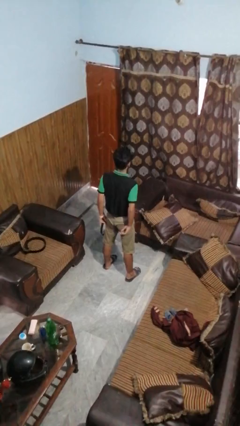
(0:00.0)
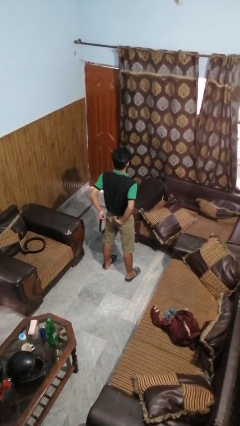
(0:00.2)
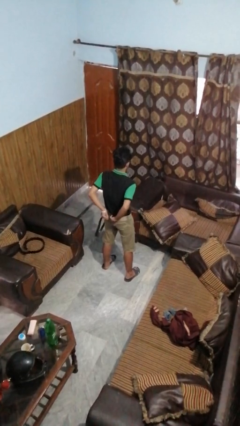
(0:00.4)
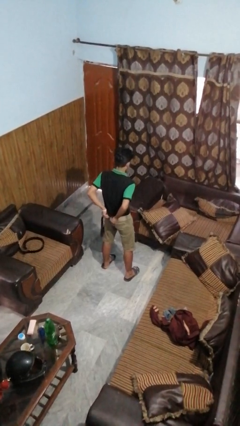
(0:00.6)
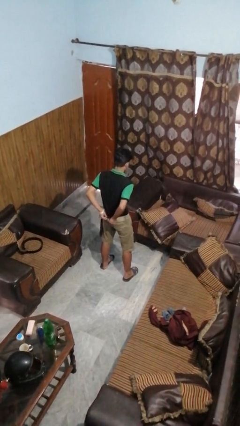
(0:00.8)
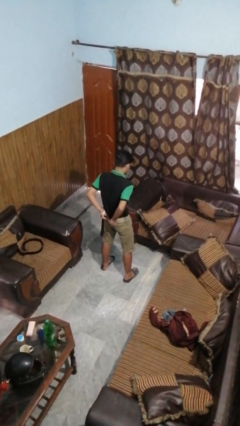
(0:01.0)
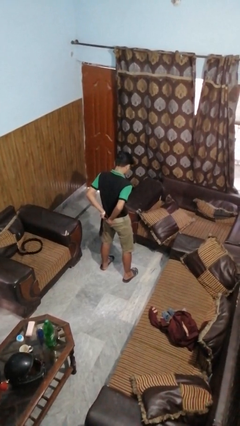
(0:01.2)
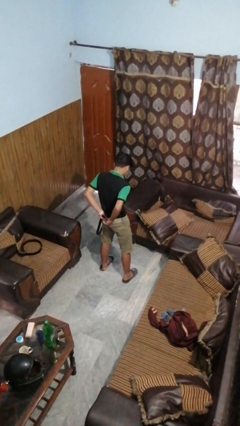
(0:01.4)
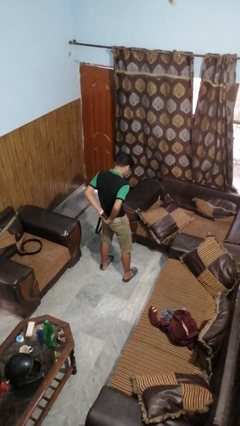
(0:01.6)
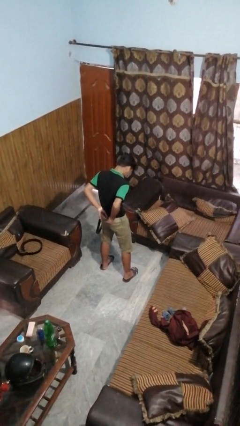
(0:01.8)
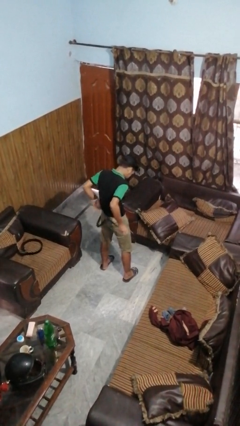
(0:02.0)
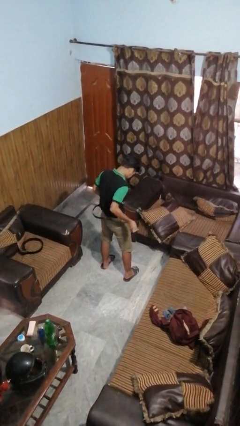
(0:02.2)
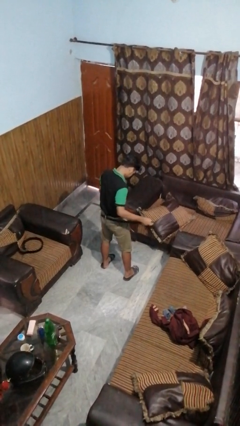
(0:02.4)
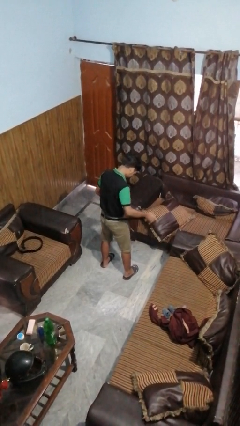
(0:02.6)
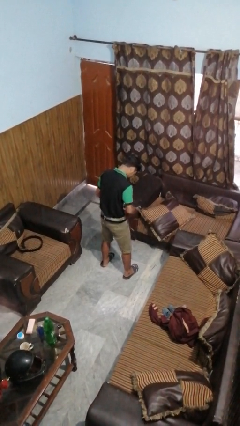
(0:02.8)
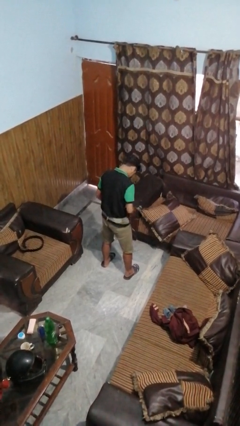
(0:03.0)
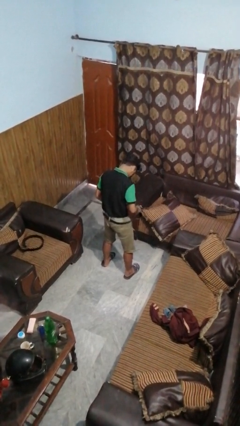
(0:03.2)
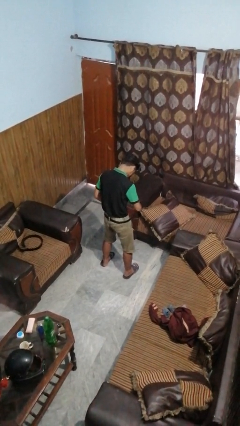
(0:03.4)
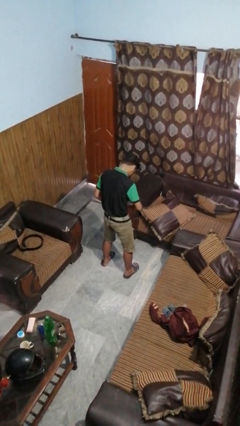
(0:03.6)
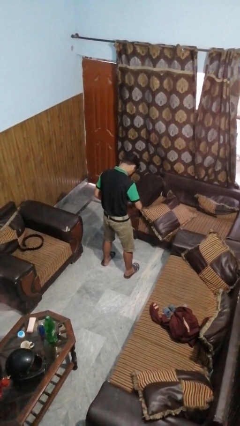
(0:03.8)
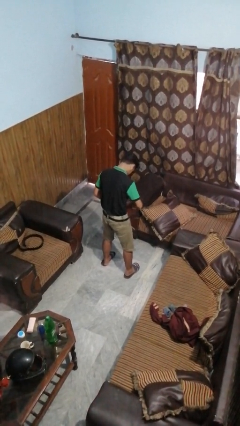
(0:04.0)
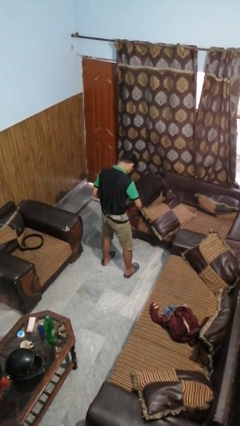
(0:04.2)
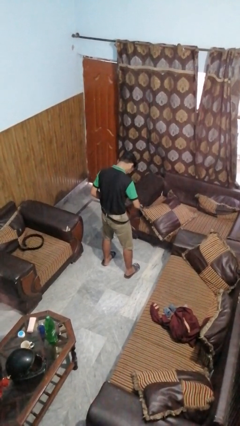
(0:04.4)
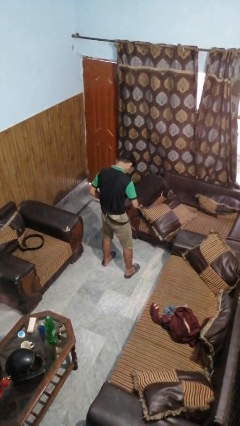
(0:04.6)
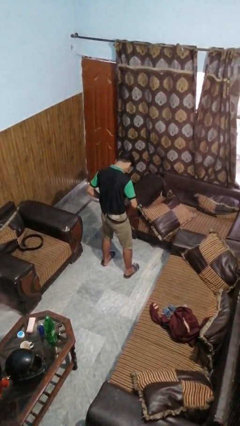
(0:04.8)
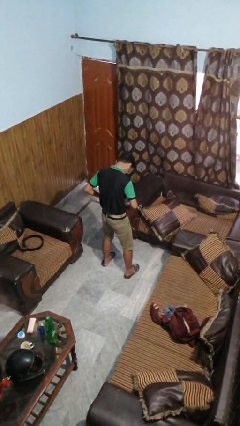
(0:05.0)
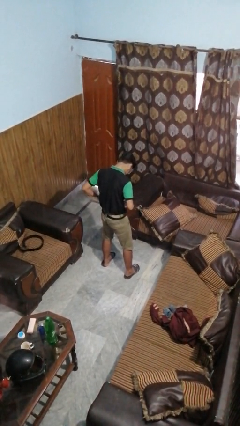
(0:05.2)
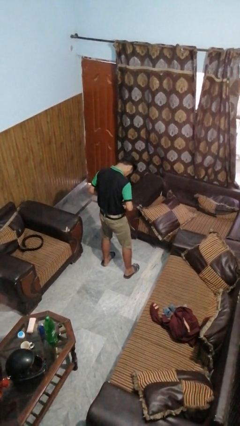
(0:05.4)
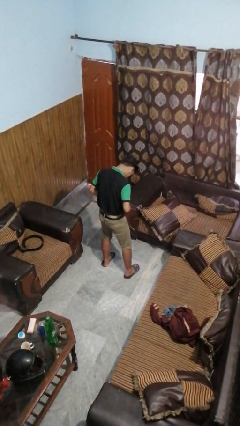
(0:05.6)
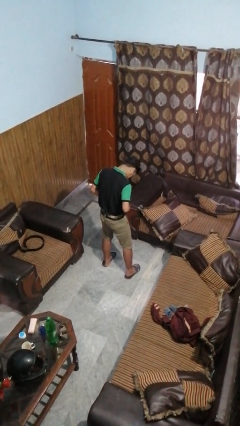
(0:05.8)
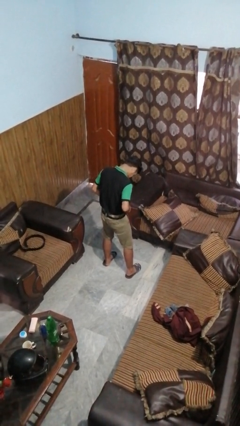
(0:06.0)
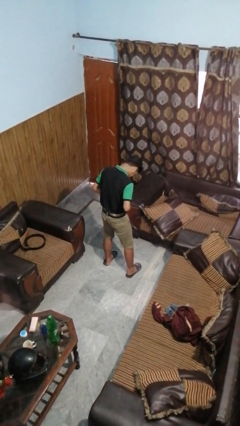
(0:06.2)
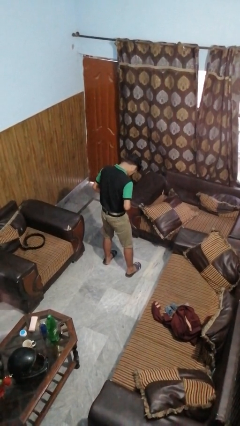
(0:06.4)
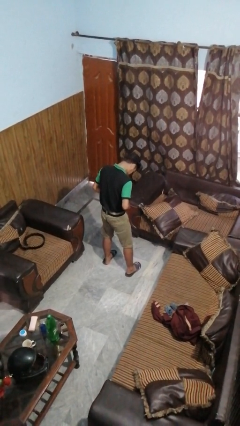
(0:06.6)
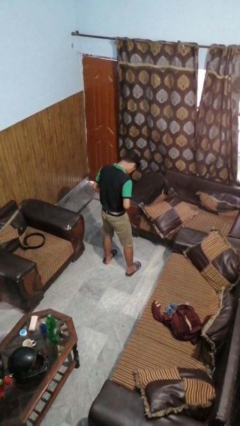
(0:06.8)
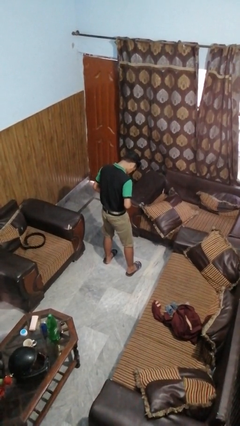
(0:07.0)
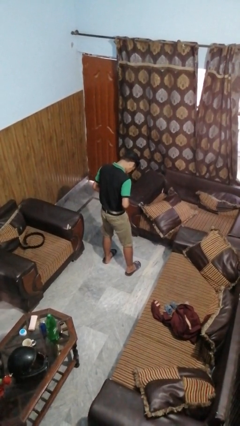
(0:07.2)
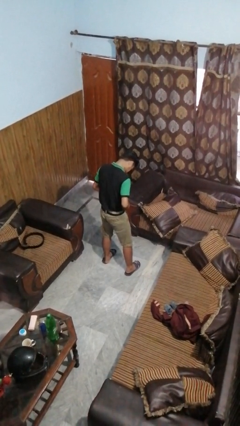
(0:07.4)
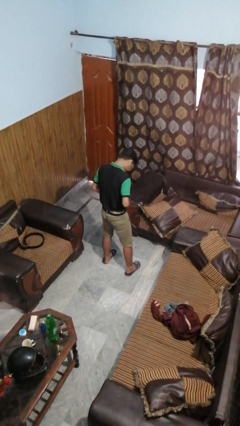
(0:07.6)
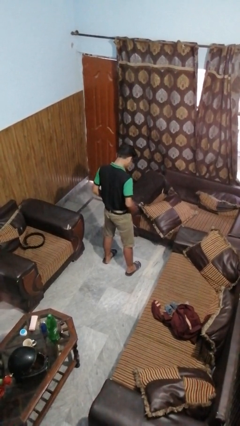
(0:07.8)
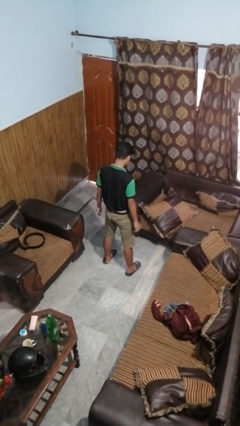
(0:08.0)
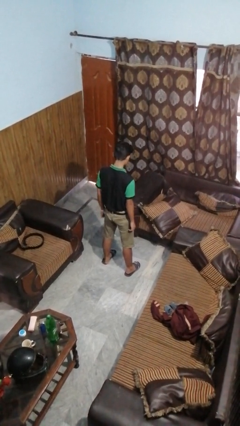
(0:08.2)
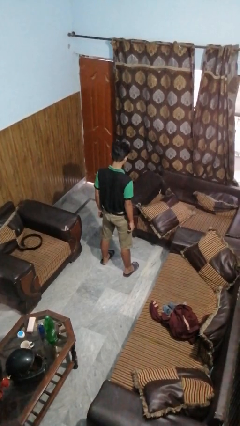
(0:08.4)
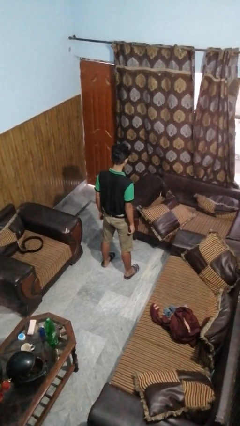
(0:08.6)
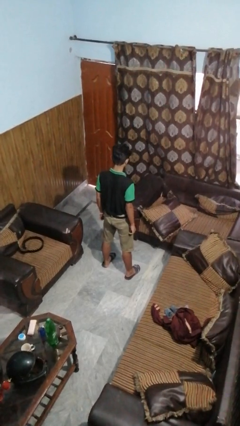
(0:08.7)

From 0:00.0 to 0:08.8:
person puts on belt

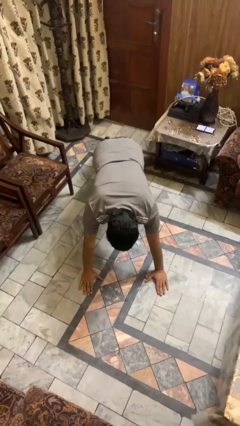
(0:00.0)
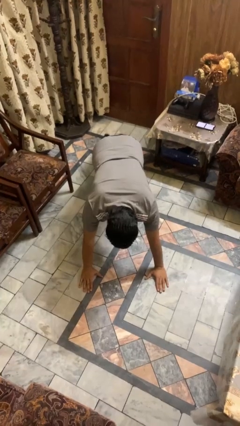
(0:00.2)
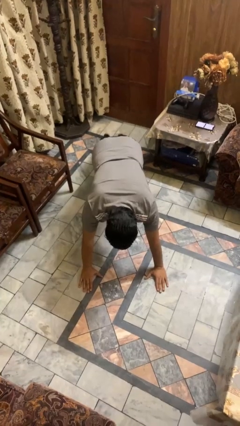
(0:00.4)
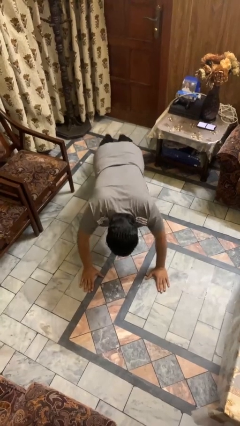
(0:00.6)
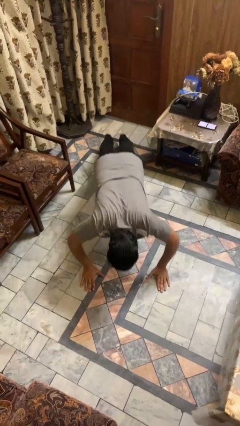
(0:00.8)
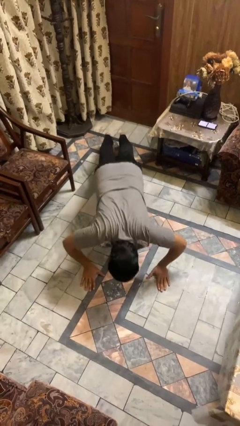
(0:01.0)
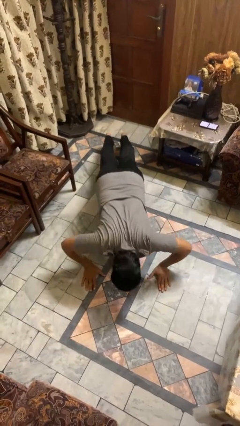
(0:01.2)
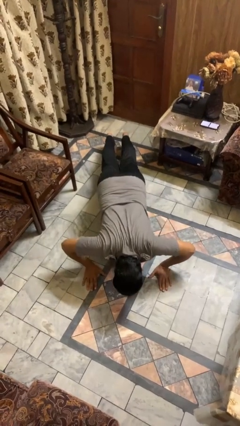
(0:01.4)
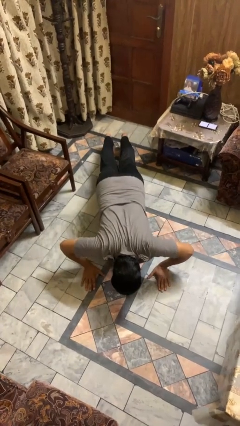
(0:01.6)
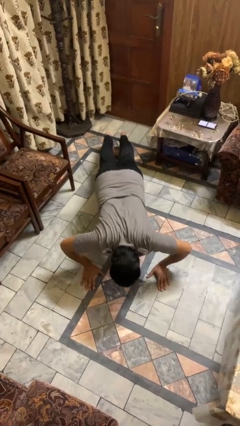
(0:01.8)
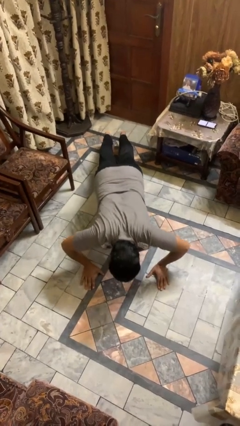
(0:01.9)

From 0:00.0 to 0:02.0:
person exercises with pushup

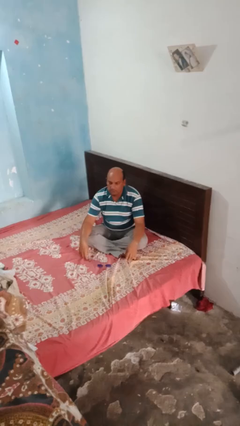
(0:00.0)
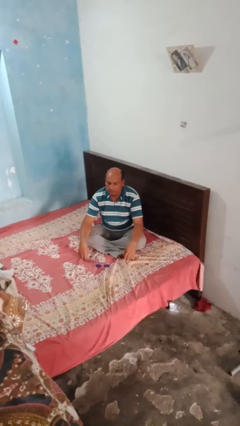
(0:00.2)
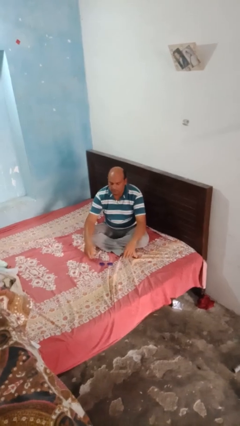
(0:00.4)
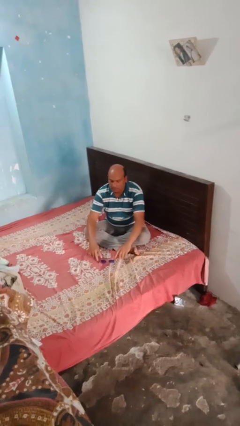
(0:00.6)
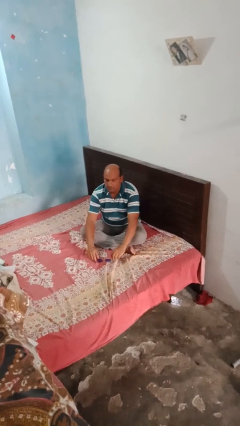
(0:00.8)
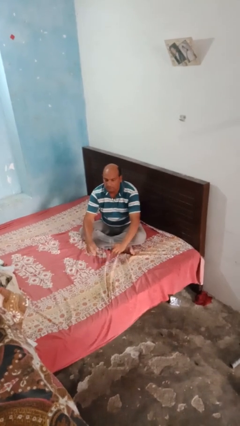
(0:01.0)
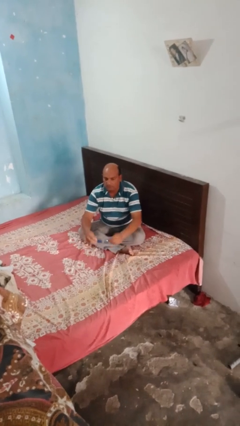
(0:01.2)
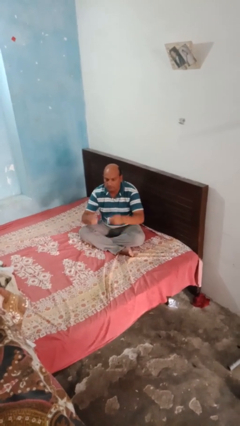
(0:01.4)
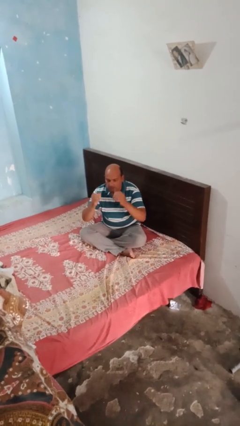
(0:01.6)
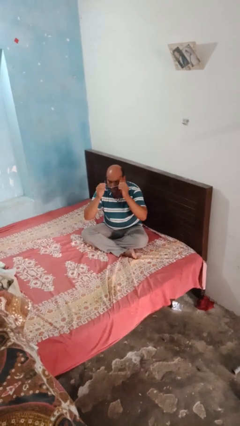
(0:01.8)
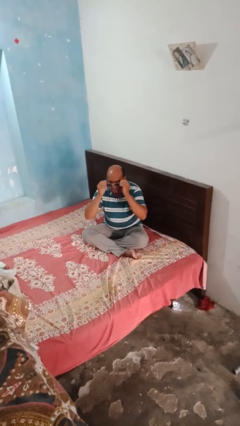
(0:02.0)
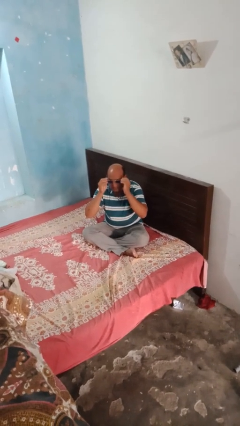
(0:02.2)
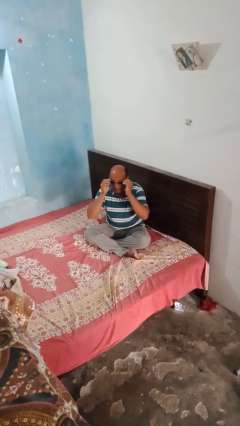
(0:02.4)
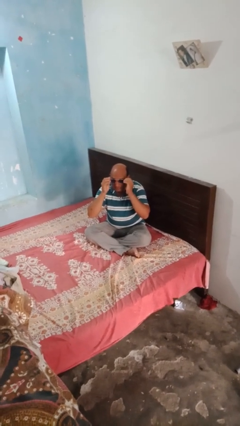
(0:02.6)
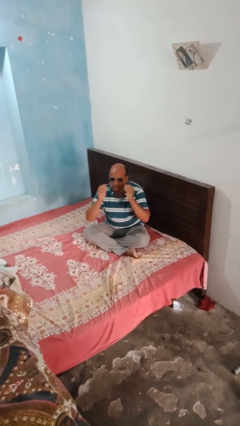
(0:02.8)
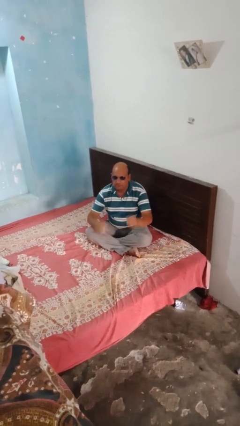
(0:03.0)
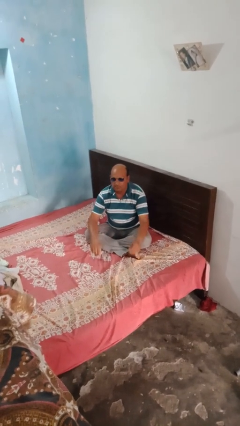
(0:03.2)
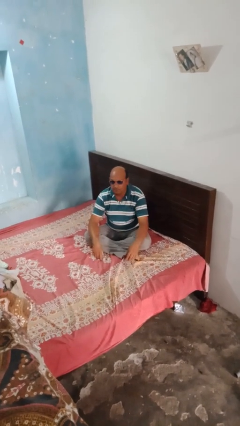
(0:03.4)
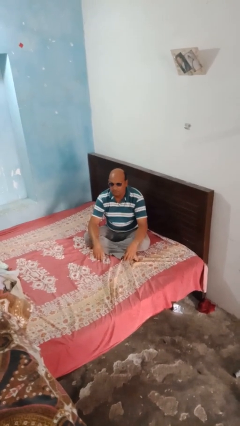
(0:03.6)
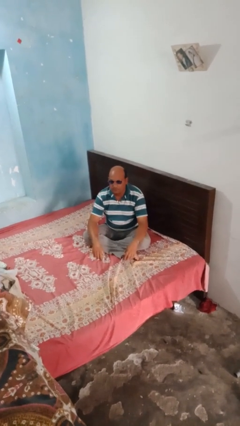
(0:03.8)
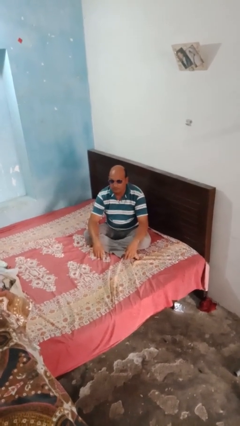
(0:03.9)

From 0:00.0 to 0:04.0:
person puts on sunglasses

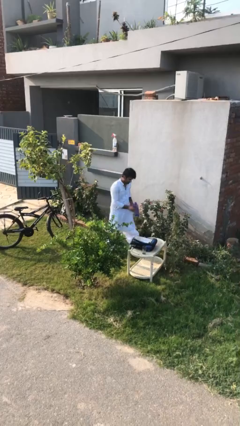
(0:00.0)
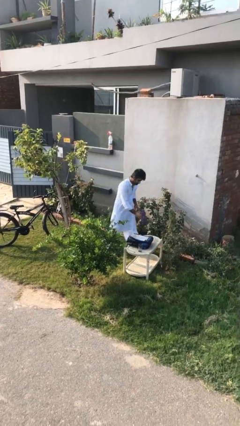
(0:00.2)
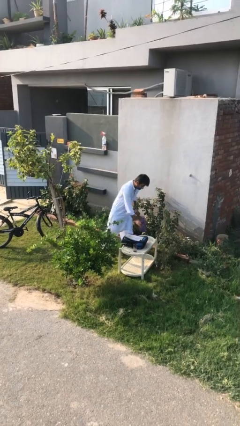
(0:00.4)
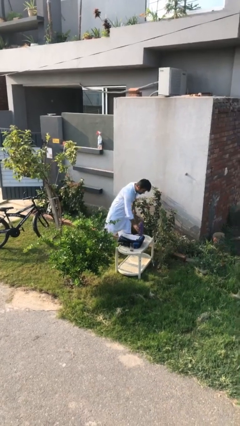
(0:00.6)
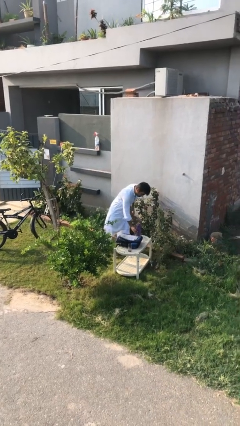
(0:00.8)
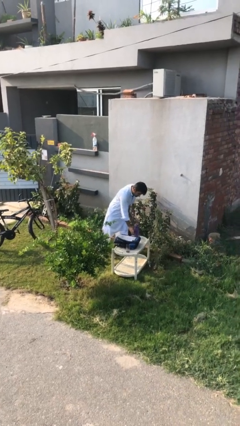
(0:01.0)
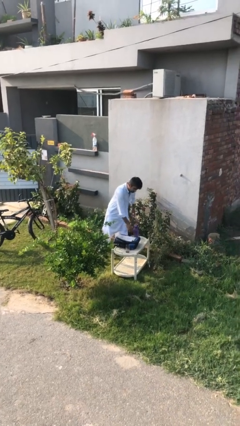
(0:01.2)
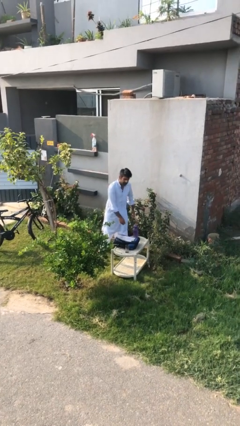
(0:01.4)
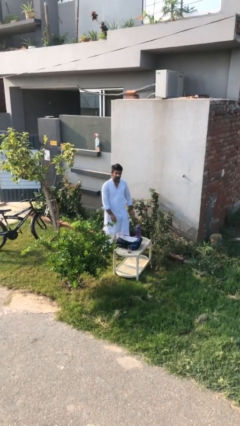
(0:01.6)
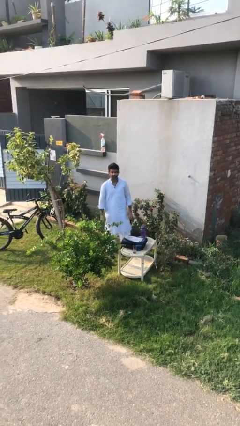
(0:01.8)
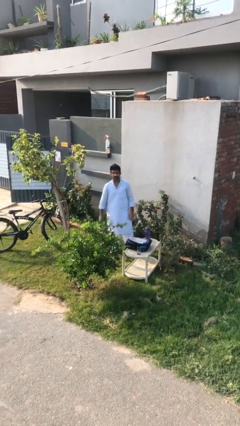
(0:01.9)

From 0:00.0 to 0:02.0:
person puts down object on table

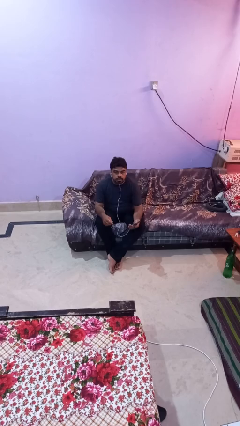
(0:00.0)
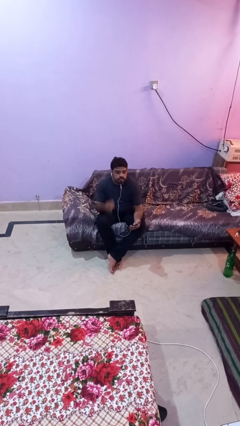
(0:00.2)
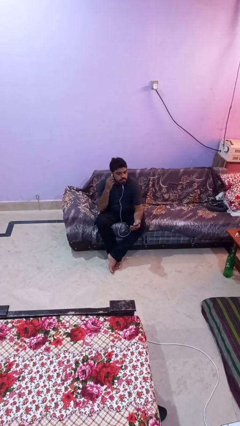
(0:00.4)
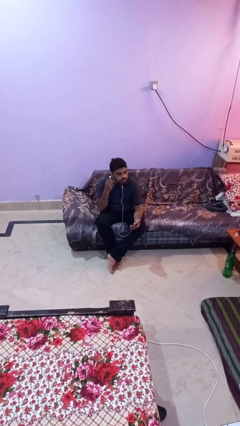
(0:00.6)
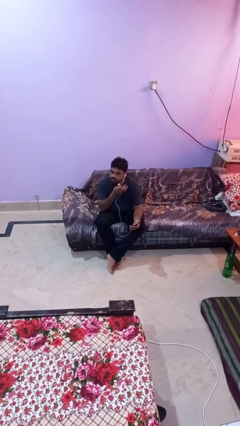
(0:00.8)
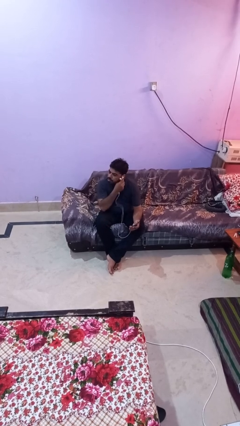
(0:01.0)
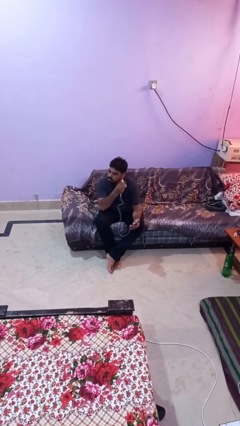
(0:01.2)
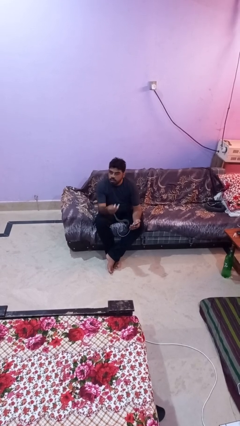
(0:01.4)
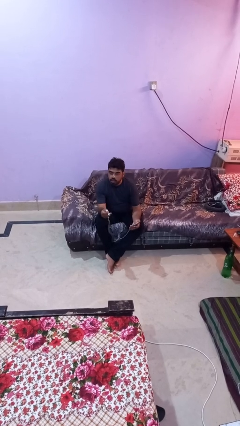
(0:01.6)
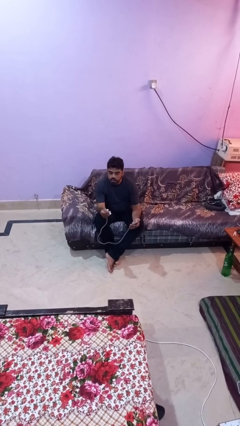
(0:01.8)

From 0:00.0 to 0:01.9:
person takes off headphones
